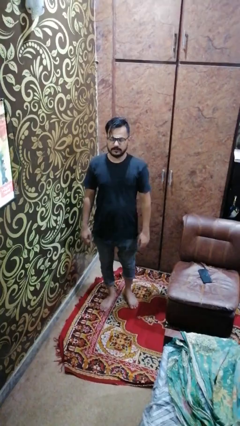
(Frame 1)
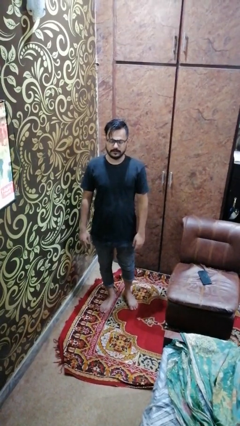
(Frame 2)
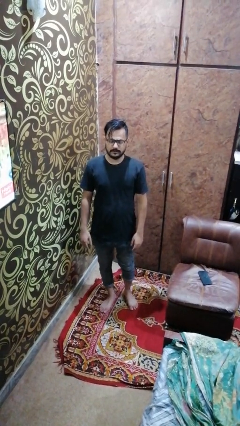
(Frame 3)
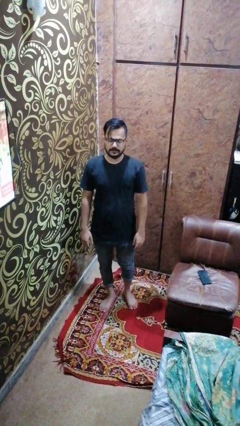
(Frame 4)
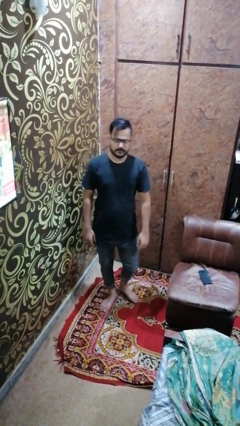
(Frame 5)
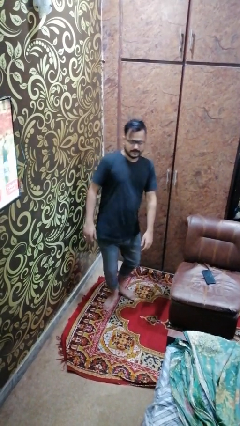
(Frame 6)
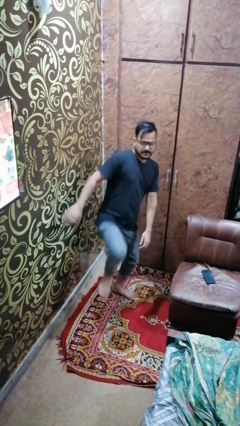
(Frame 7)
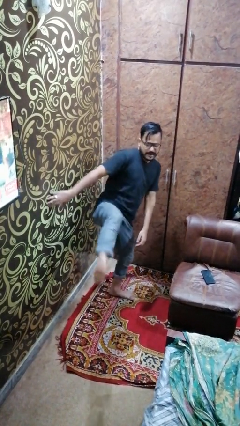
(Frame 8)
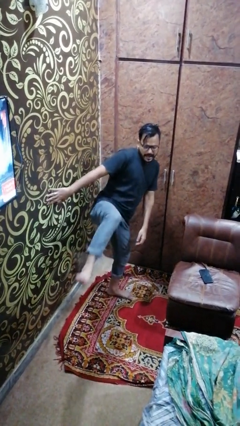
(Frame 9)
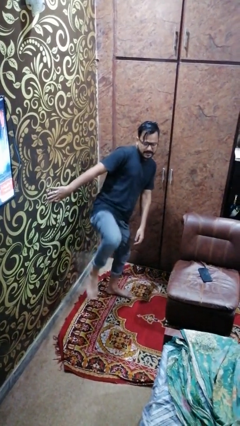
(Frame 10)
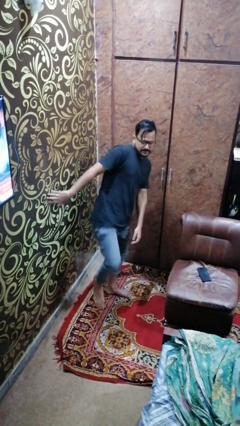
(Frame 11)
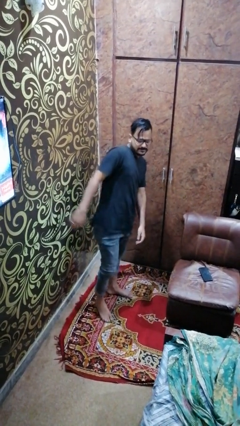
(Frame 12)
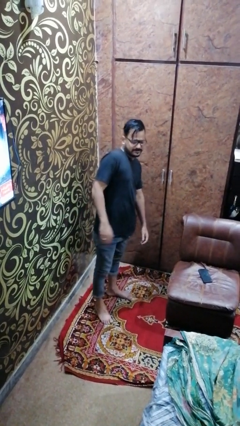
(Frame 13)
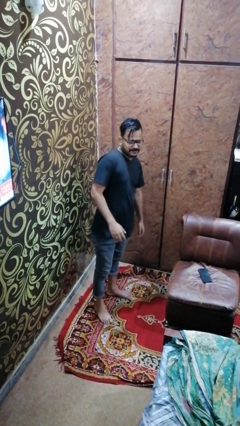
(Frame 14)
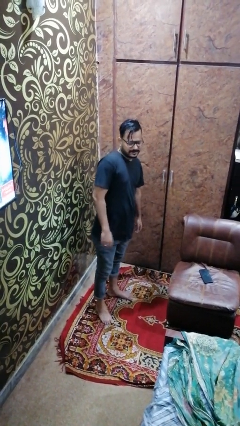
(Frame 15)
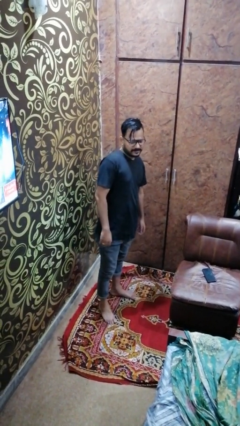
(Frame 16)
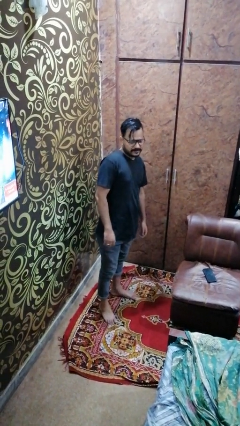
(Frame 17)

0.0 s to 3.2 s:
person karate kicks

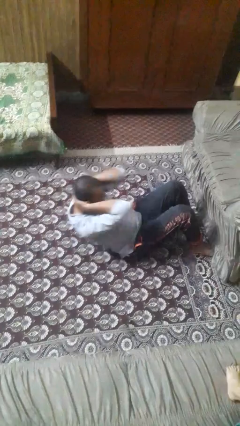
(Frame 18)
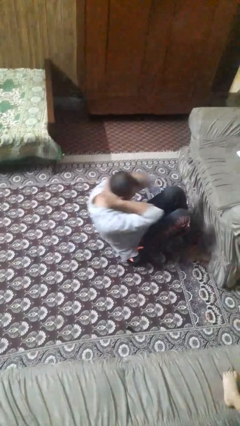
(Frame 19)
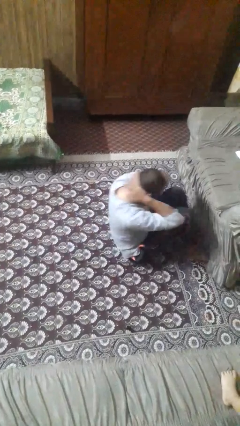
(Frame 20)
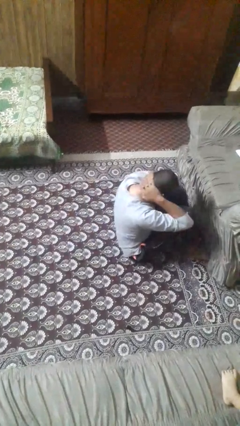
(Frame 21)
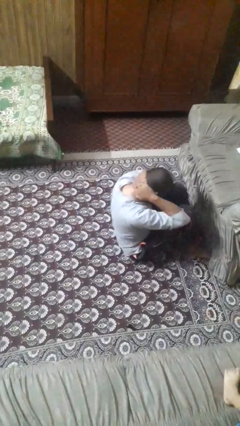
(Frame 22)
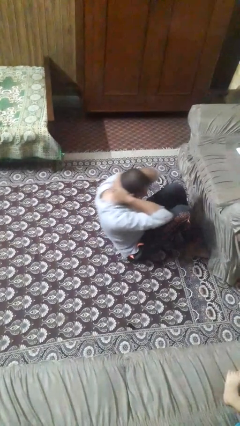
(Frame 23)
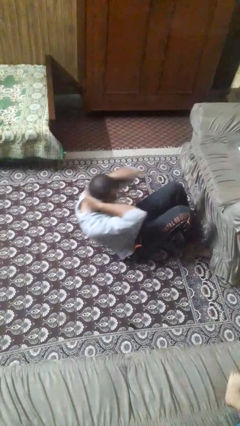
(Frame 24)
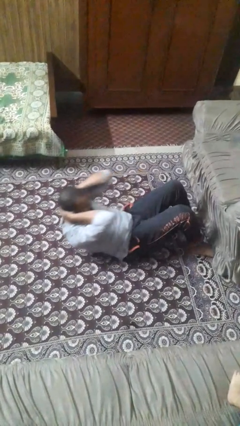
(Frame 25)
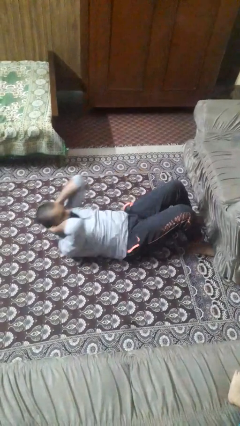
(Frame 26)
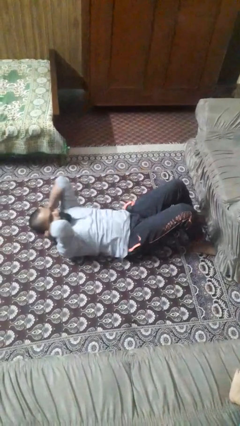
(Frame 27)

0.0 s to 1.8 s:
person exercises with situp

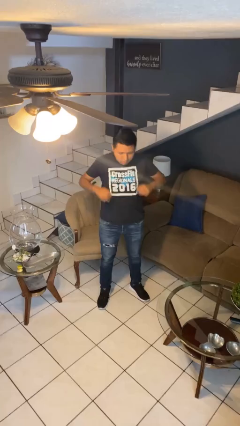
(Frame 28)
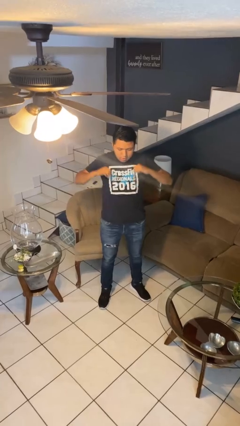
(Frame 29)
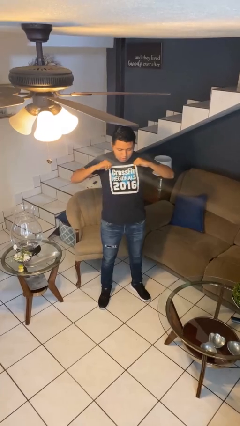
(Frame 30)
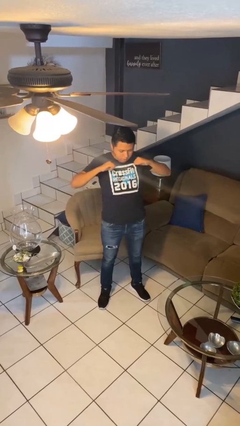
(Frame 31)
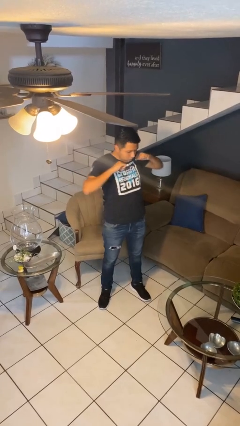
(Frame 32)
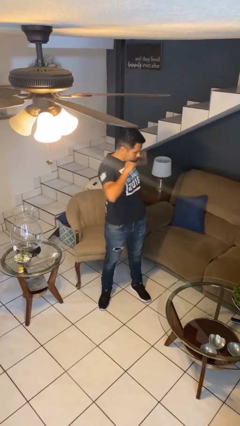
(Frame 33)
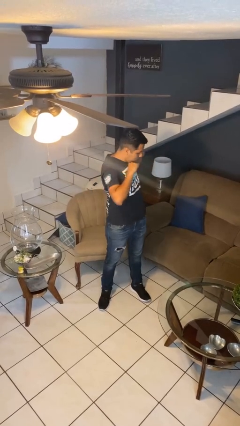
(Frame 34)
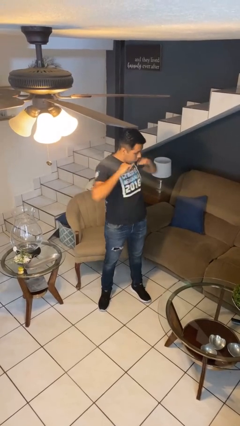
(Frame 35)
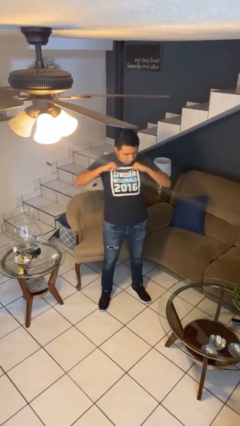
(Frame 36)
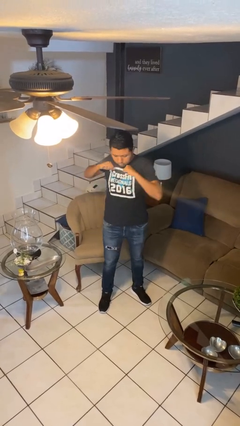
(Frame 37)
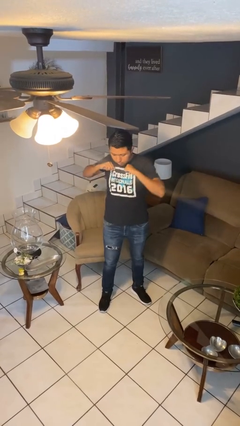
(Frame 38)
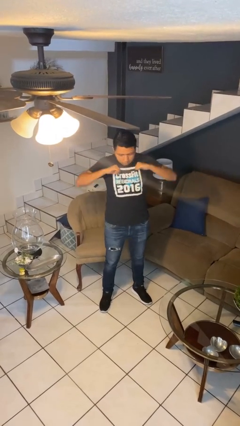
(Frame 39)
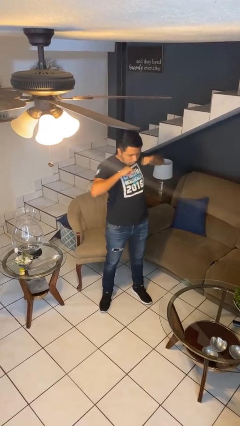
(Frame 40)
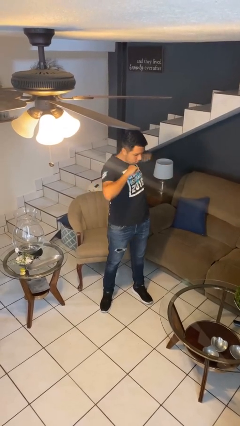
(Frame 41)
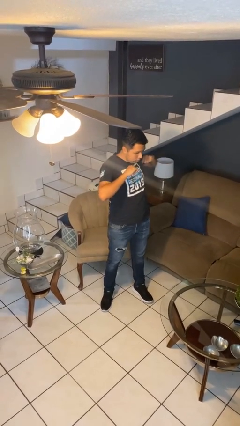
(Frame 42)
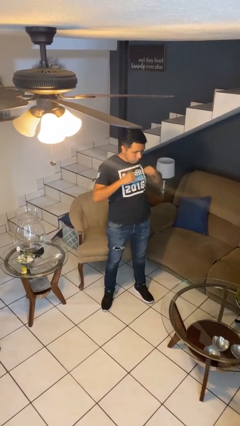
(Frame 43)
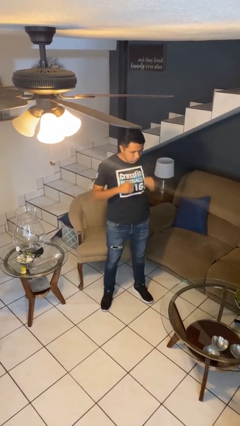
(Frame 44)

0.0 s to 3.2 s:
person stretches arms to side

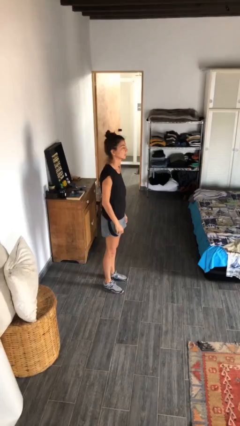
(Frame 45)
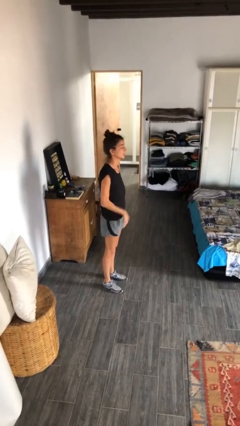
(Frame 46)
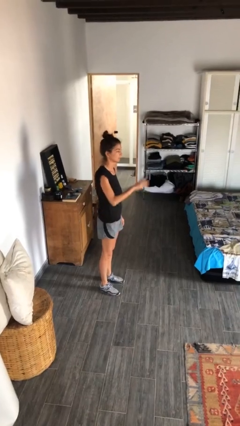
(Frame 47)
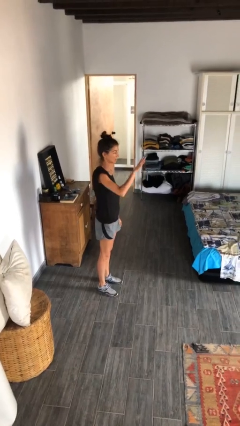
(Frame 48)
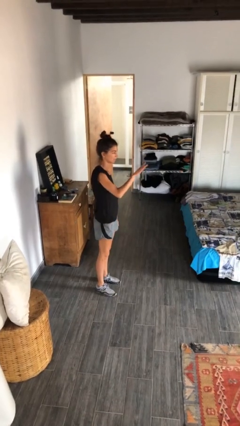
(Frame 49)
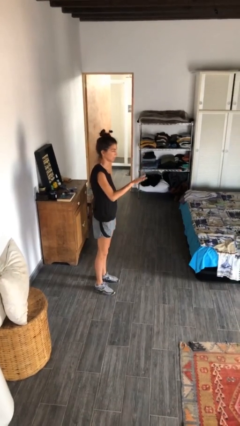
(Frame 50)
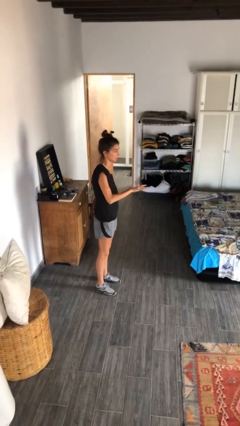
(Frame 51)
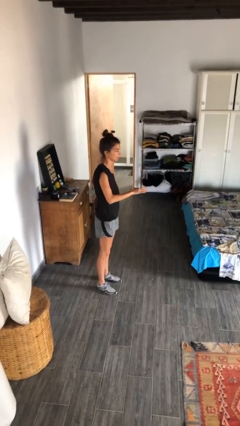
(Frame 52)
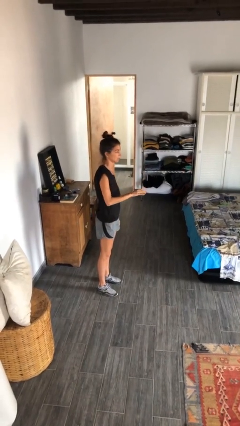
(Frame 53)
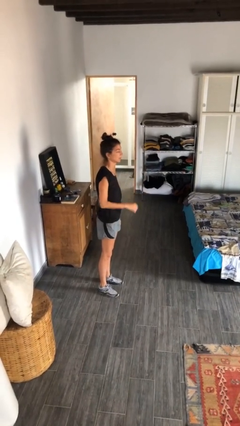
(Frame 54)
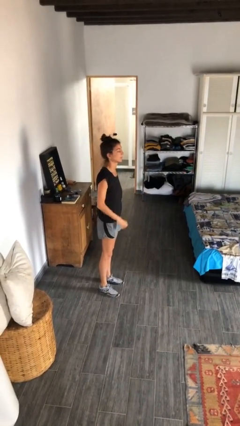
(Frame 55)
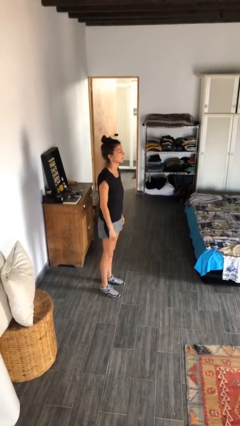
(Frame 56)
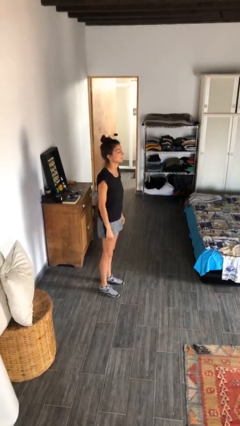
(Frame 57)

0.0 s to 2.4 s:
person gestures swipe down

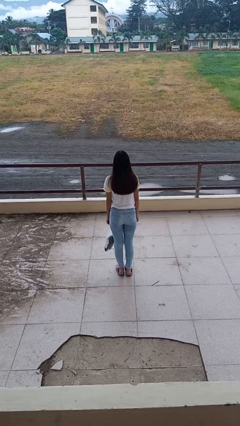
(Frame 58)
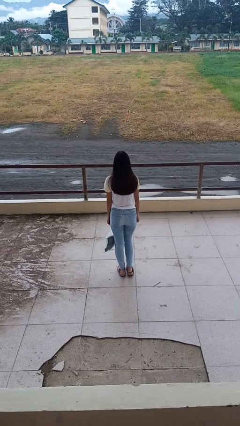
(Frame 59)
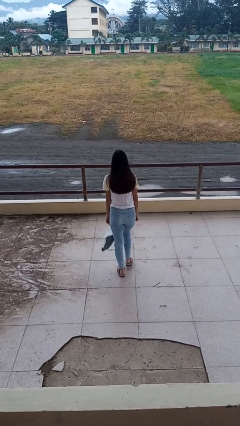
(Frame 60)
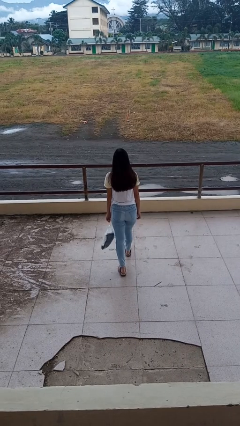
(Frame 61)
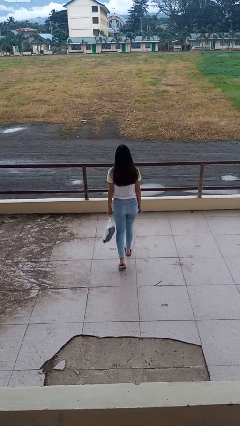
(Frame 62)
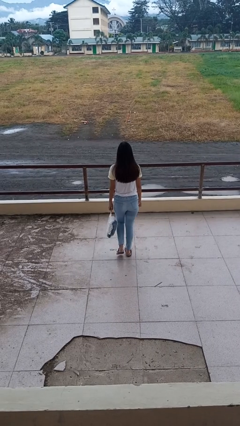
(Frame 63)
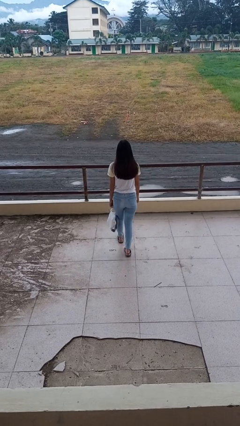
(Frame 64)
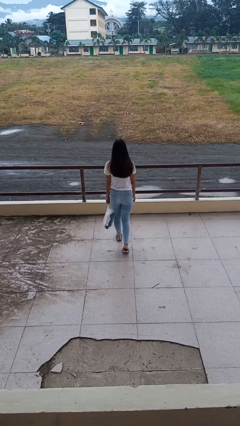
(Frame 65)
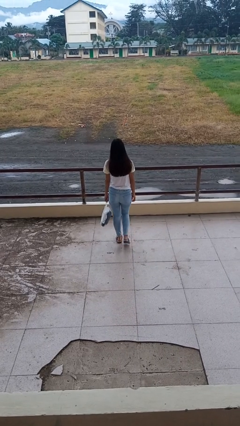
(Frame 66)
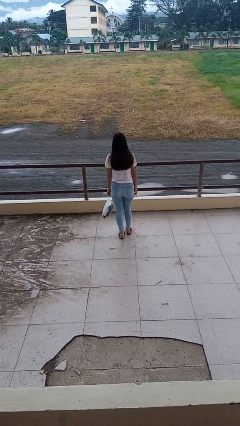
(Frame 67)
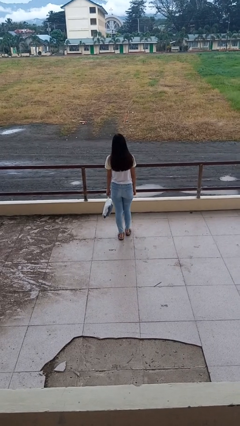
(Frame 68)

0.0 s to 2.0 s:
person carries groceries

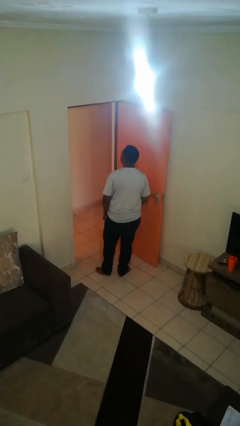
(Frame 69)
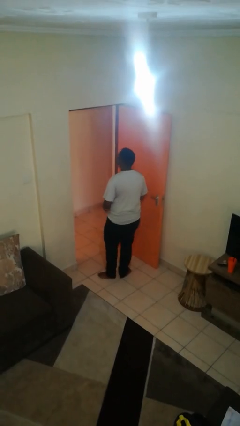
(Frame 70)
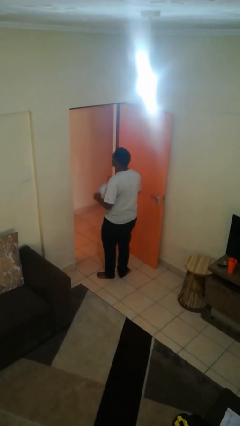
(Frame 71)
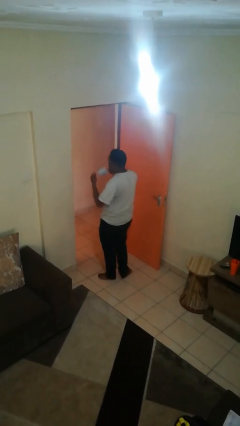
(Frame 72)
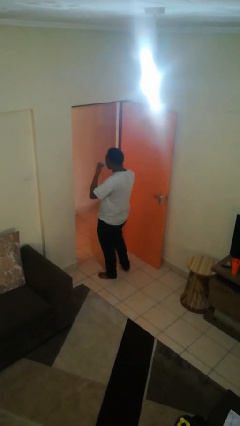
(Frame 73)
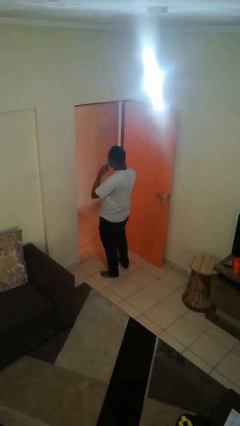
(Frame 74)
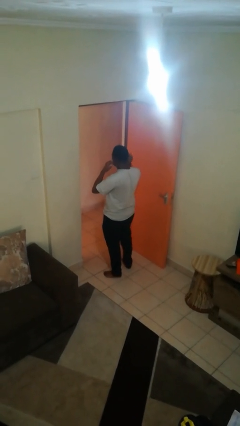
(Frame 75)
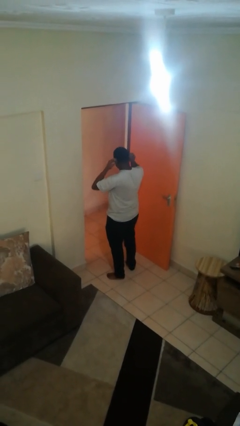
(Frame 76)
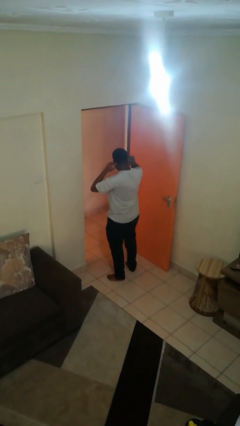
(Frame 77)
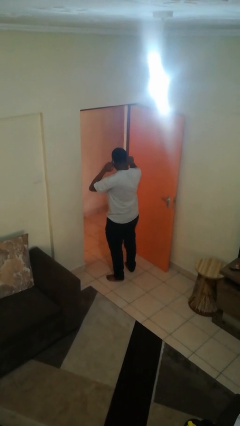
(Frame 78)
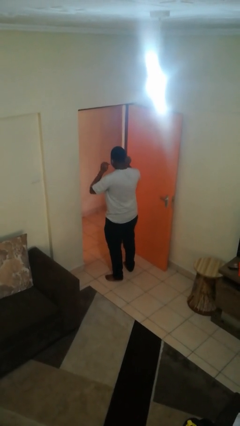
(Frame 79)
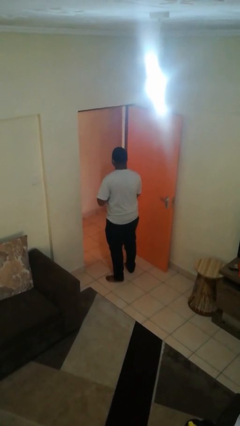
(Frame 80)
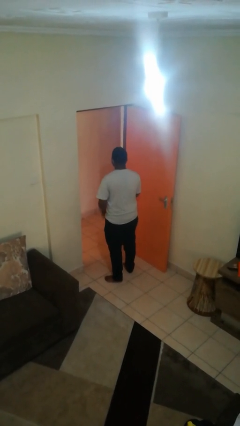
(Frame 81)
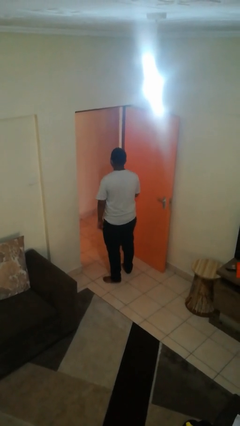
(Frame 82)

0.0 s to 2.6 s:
person puts on facemask

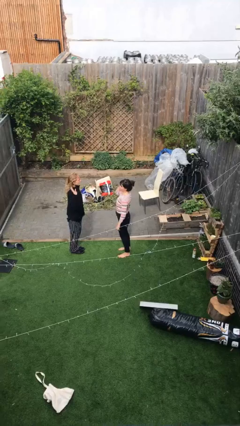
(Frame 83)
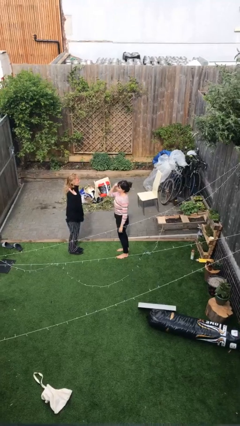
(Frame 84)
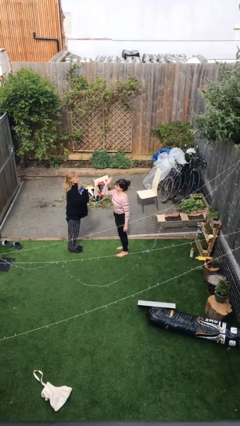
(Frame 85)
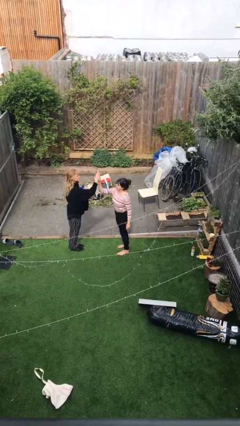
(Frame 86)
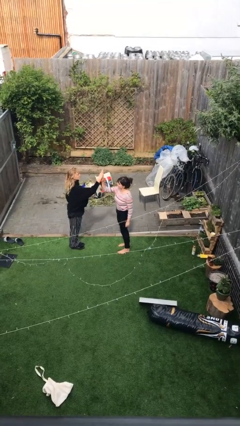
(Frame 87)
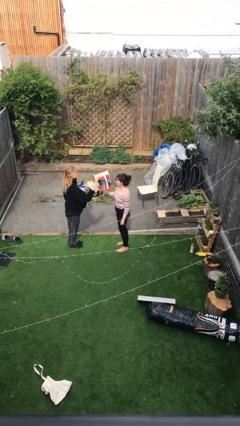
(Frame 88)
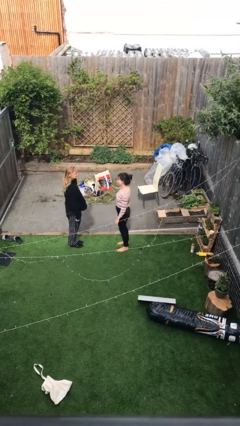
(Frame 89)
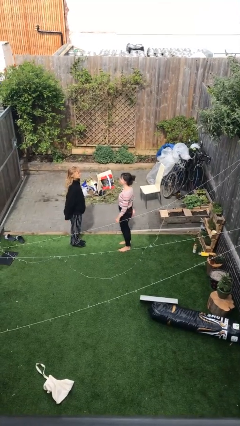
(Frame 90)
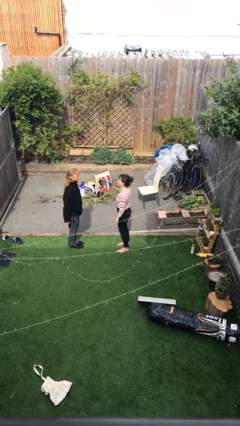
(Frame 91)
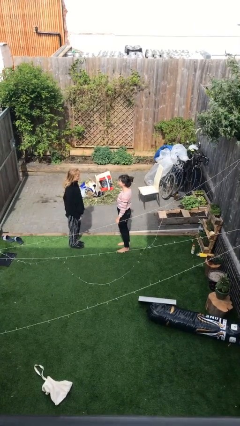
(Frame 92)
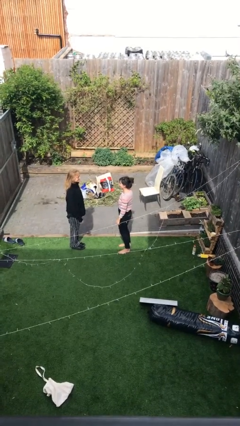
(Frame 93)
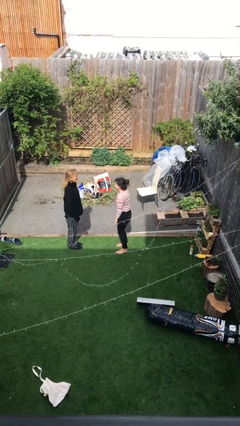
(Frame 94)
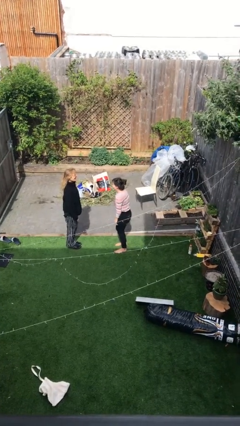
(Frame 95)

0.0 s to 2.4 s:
person highfives hand
